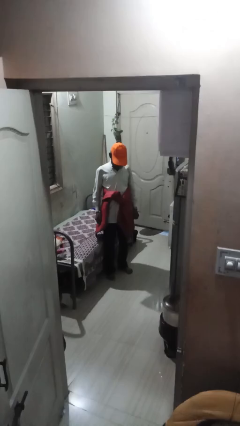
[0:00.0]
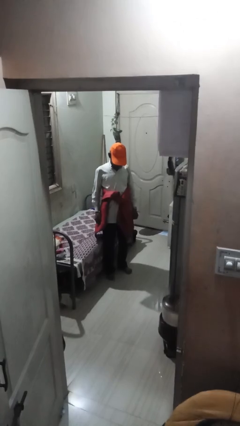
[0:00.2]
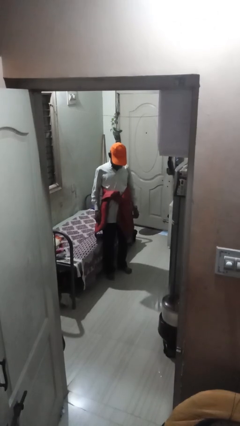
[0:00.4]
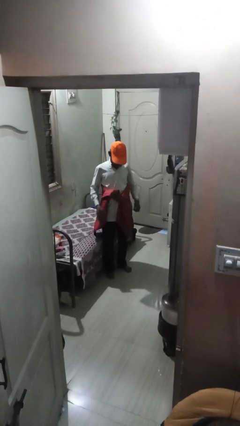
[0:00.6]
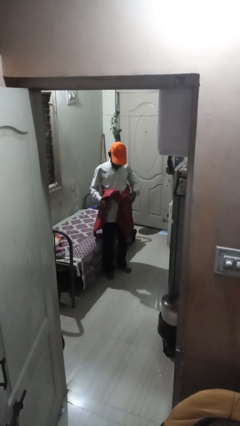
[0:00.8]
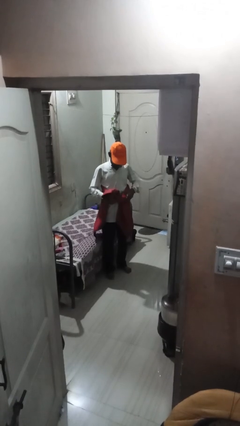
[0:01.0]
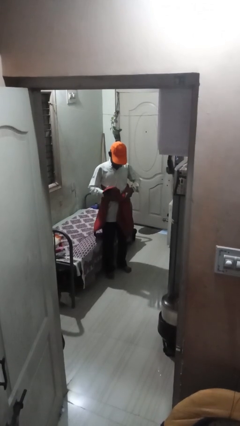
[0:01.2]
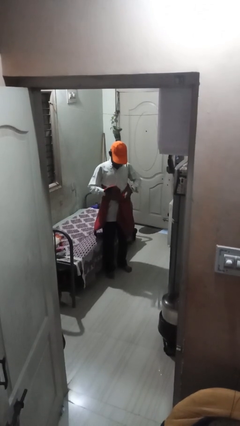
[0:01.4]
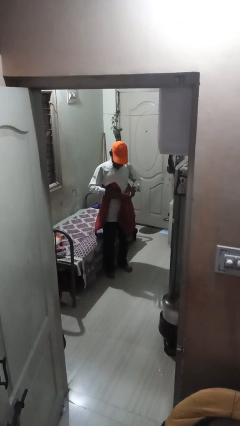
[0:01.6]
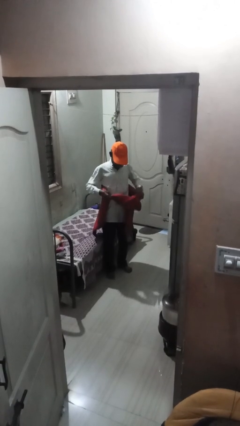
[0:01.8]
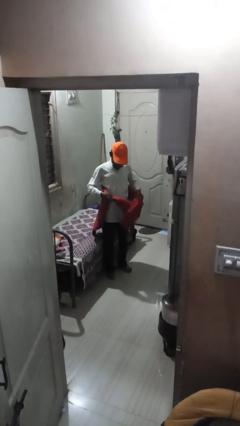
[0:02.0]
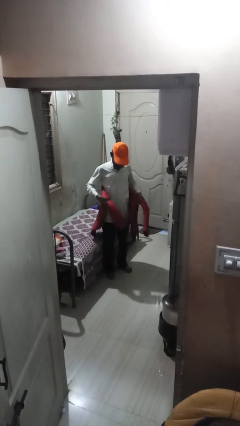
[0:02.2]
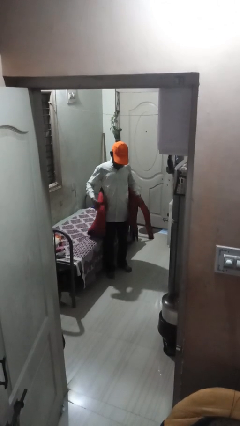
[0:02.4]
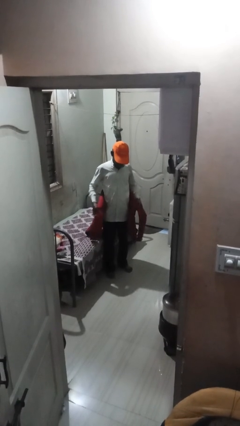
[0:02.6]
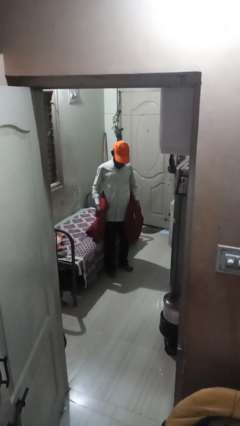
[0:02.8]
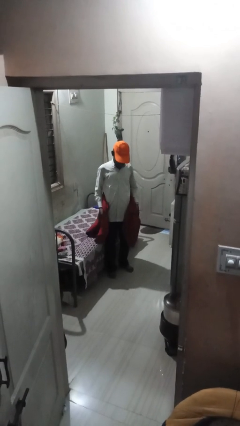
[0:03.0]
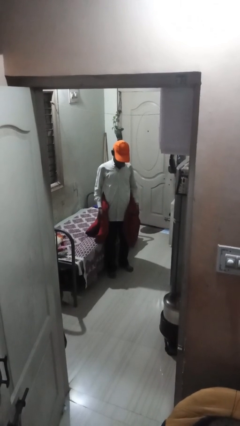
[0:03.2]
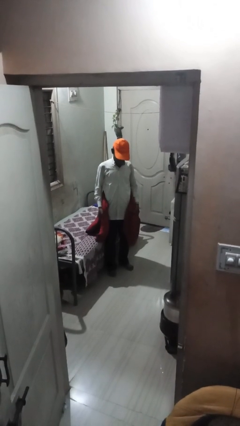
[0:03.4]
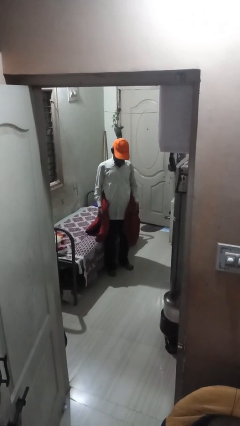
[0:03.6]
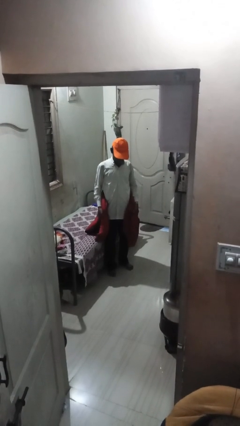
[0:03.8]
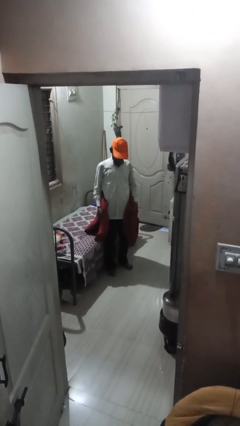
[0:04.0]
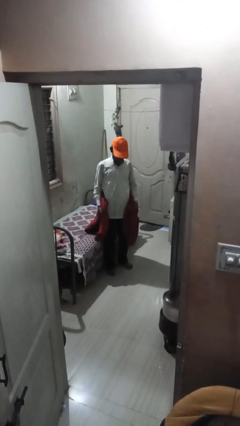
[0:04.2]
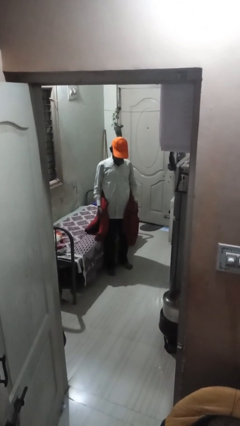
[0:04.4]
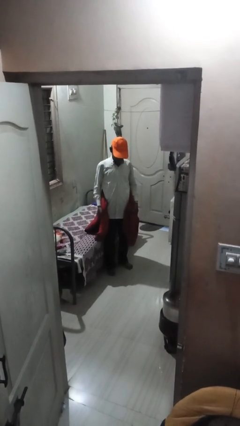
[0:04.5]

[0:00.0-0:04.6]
person unties jacket around waist

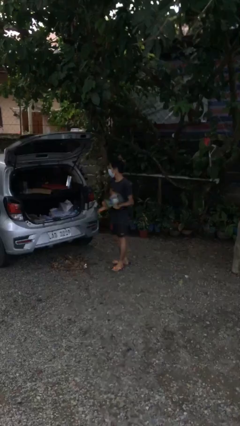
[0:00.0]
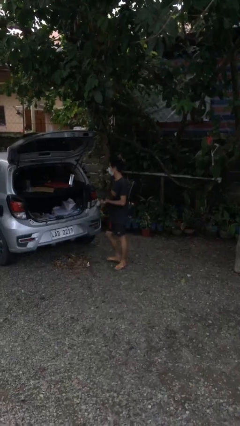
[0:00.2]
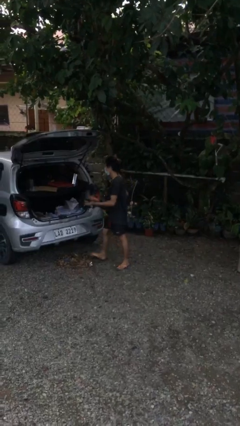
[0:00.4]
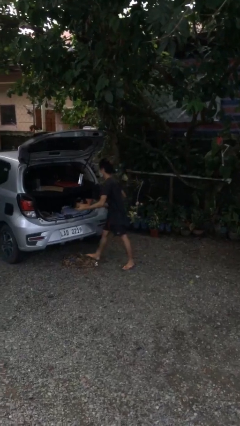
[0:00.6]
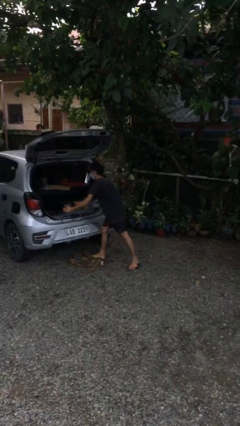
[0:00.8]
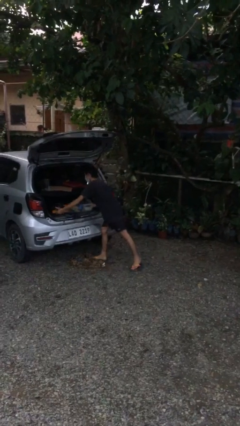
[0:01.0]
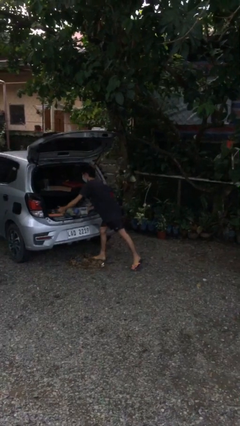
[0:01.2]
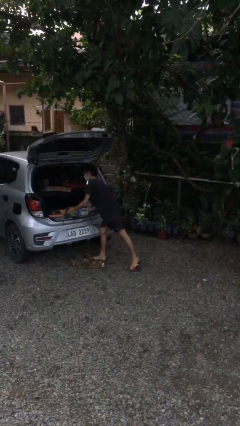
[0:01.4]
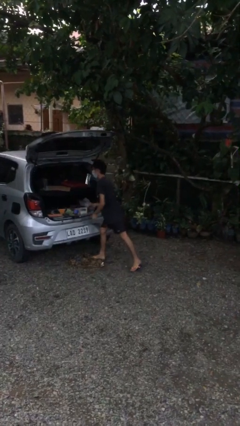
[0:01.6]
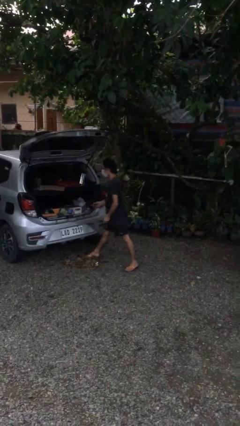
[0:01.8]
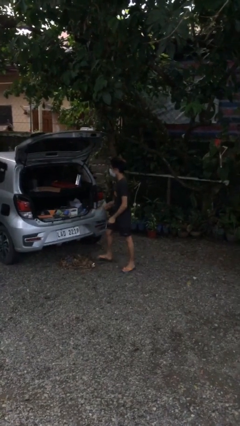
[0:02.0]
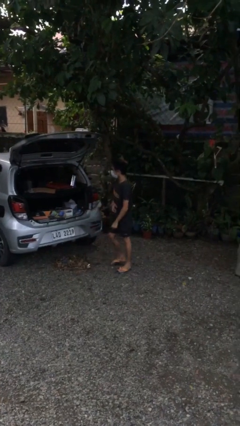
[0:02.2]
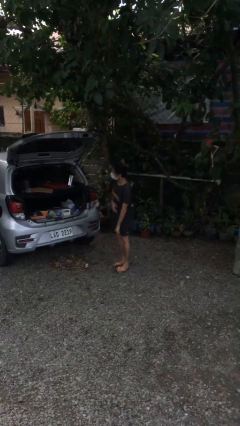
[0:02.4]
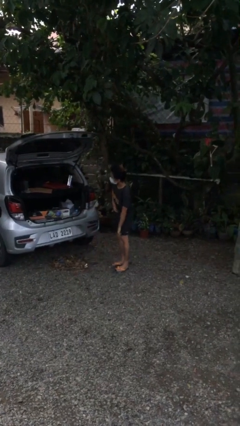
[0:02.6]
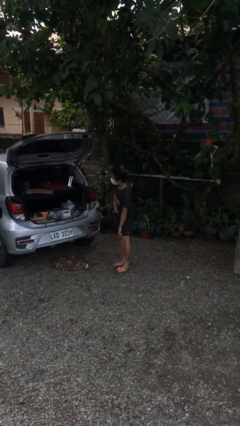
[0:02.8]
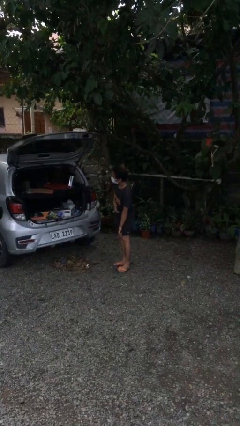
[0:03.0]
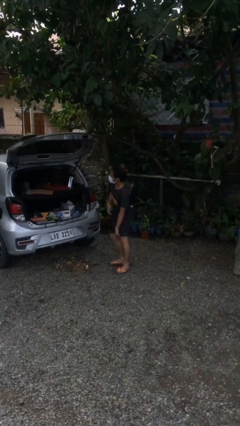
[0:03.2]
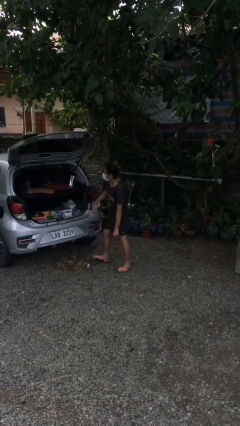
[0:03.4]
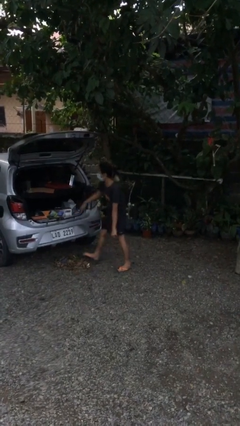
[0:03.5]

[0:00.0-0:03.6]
person loads car

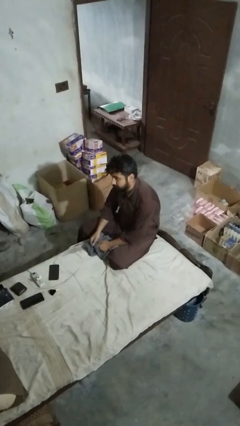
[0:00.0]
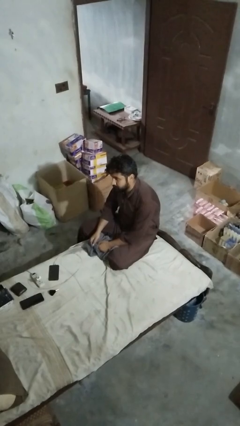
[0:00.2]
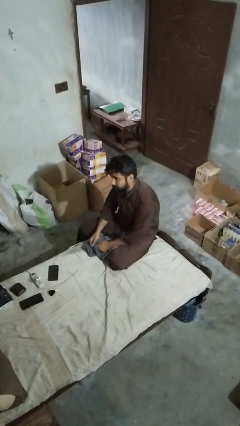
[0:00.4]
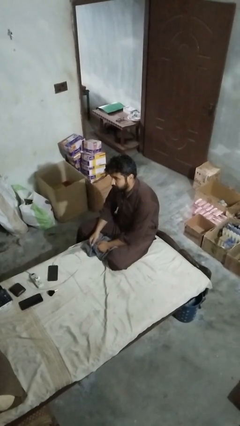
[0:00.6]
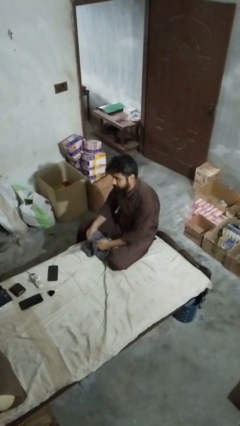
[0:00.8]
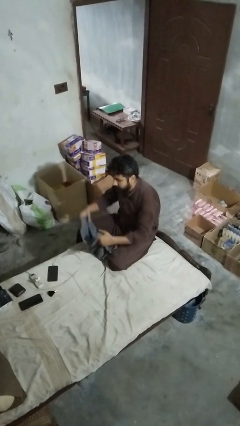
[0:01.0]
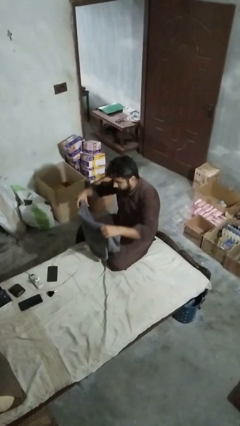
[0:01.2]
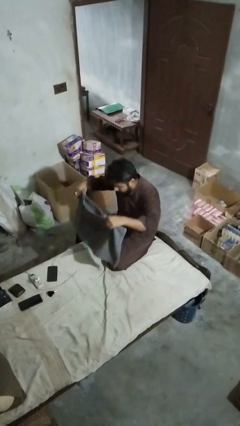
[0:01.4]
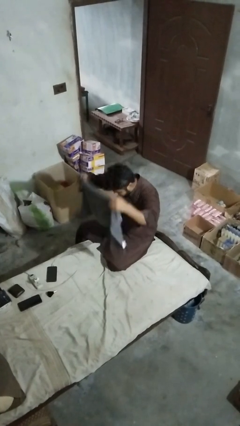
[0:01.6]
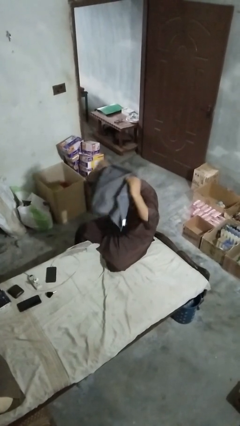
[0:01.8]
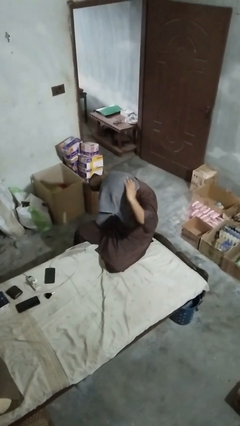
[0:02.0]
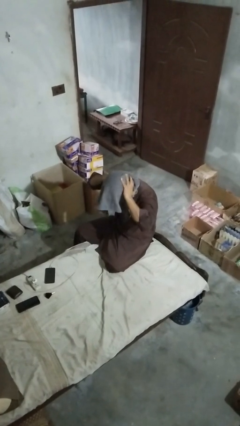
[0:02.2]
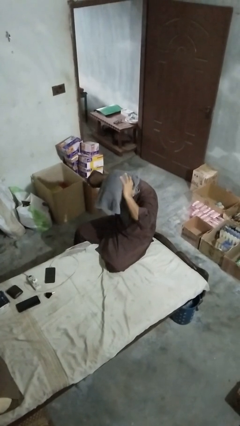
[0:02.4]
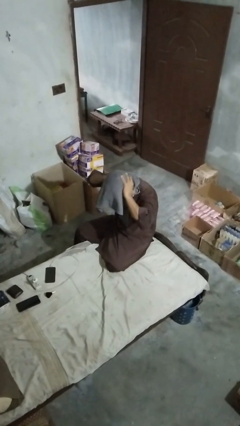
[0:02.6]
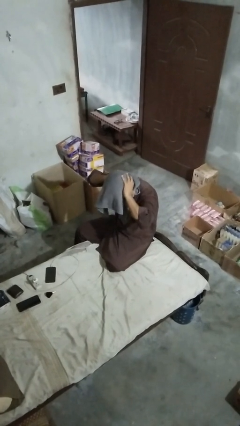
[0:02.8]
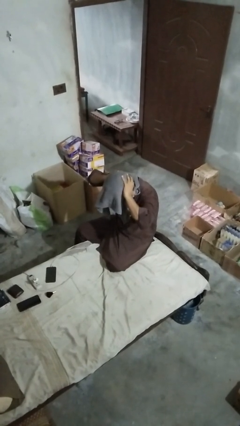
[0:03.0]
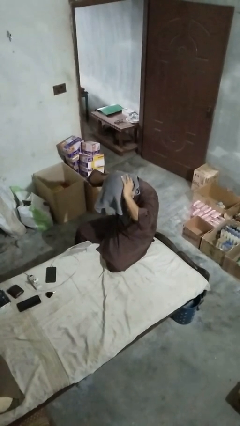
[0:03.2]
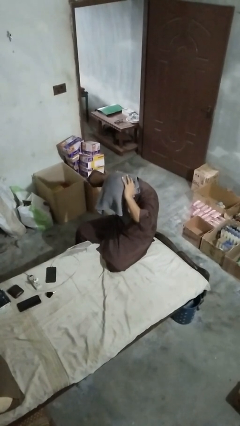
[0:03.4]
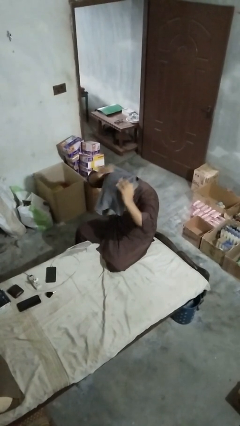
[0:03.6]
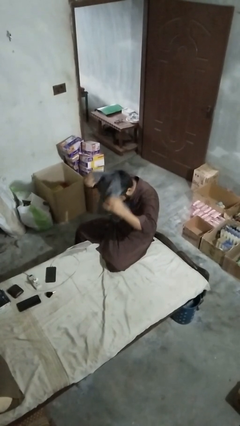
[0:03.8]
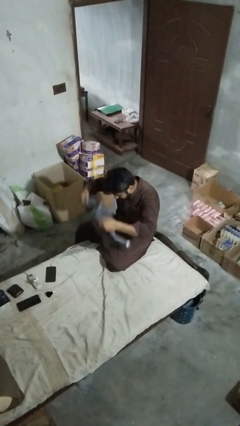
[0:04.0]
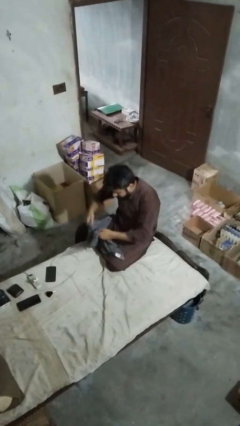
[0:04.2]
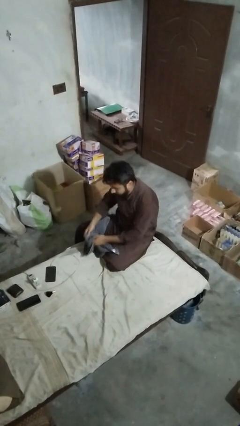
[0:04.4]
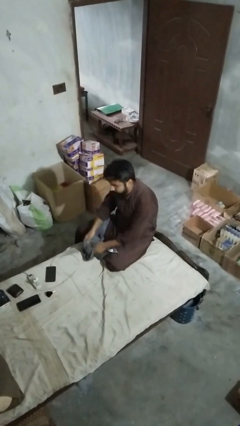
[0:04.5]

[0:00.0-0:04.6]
person dries hair with towel

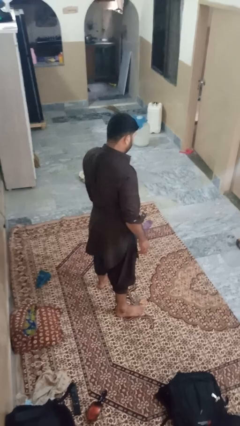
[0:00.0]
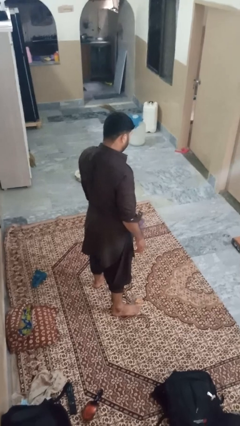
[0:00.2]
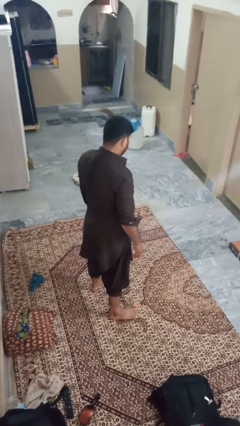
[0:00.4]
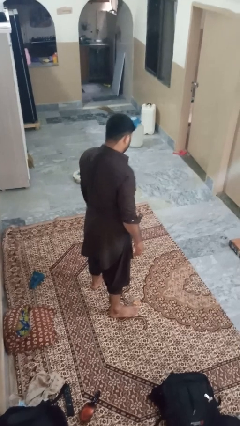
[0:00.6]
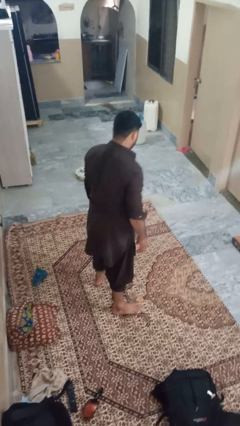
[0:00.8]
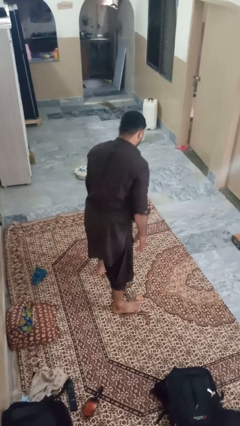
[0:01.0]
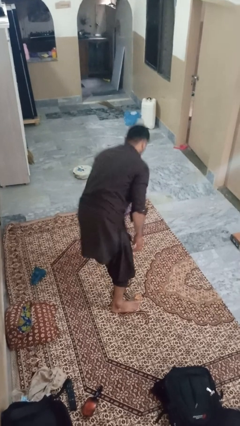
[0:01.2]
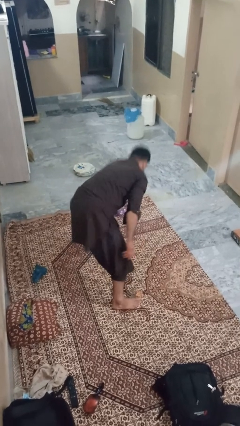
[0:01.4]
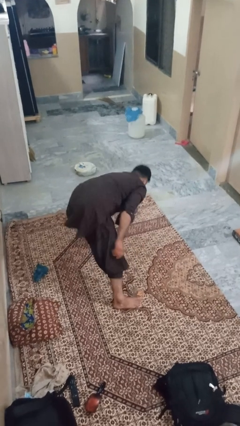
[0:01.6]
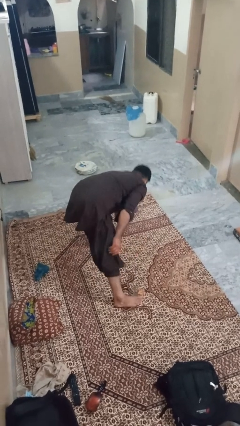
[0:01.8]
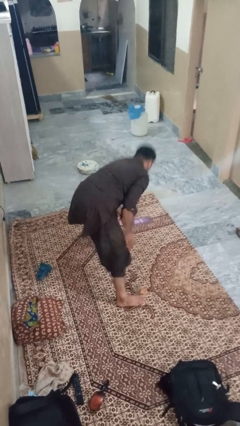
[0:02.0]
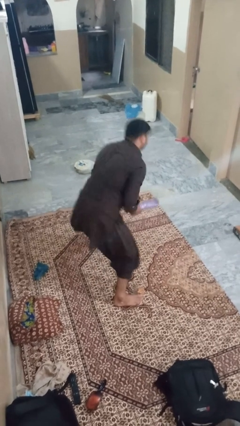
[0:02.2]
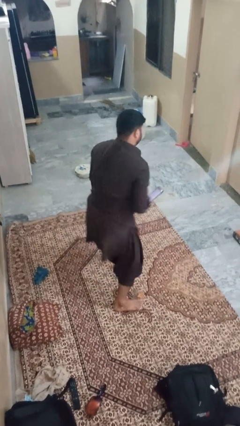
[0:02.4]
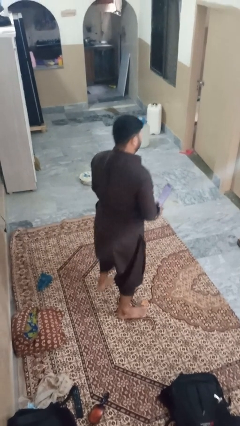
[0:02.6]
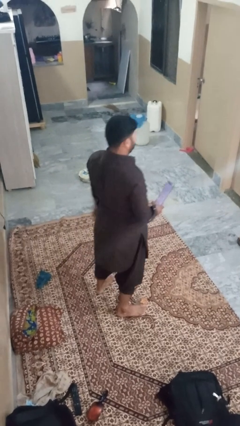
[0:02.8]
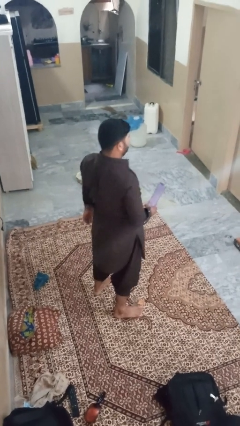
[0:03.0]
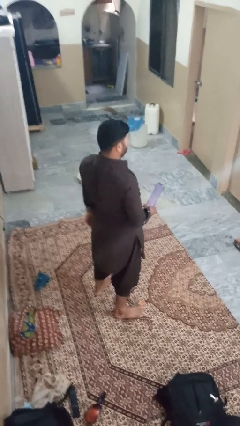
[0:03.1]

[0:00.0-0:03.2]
person picks up object from floor

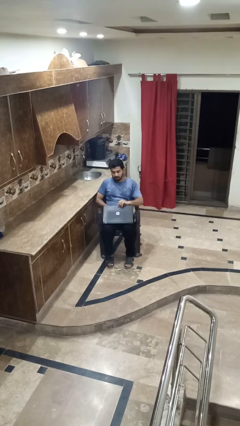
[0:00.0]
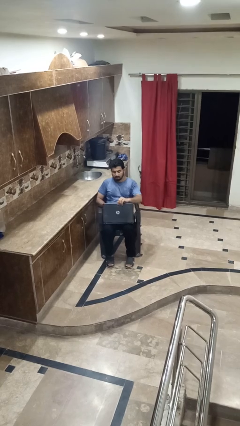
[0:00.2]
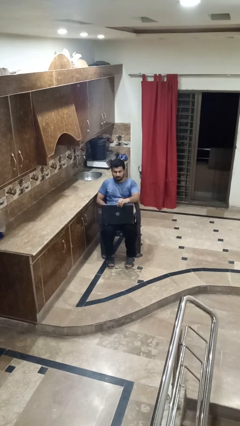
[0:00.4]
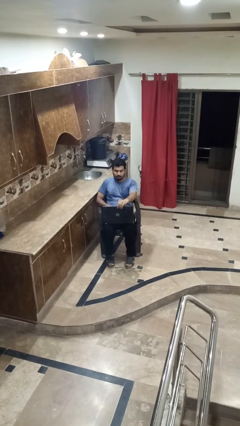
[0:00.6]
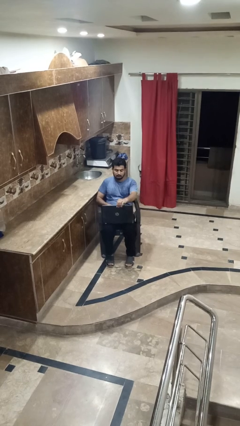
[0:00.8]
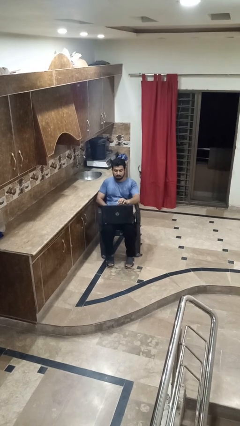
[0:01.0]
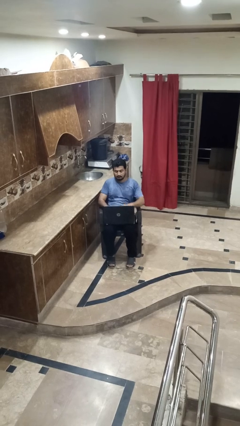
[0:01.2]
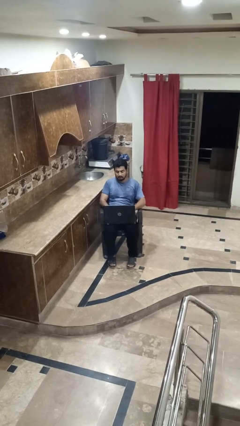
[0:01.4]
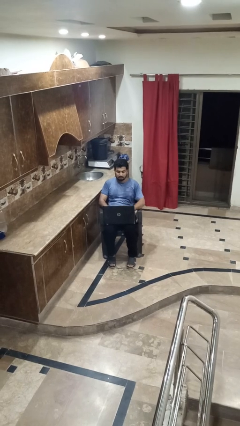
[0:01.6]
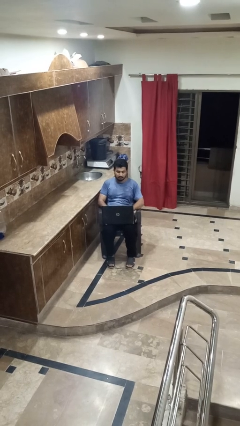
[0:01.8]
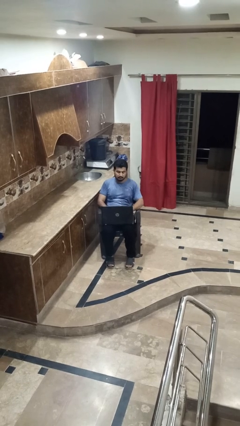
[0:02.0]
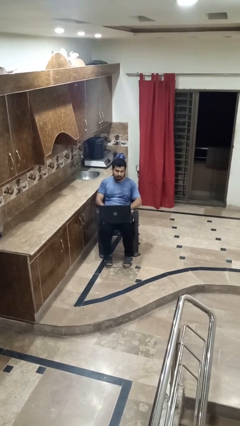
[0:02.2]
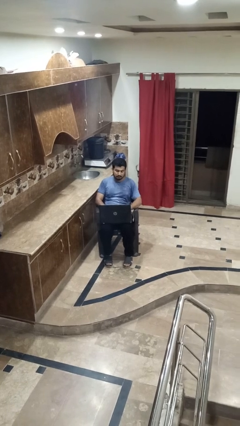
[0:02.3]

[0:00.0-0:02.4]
person opens laptop
